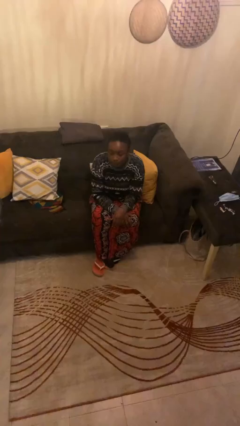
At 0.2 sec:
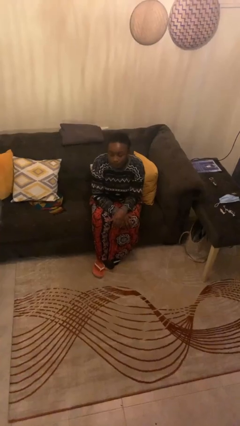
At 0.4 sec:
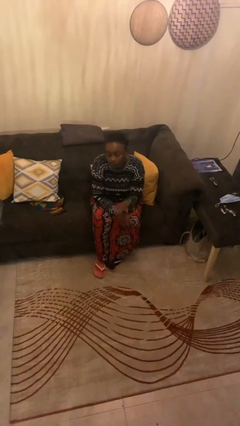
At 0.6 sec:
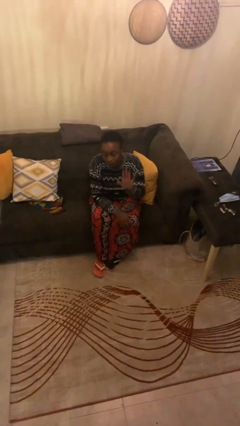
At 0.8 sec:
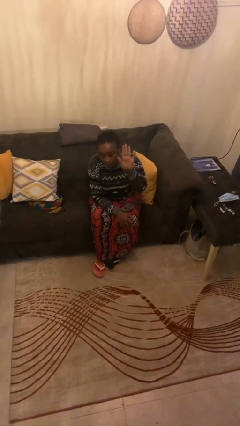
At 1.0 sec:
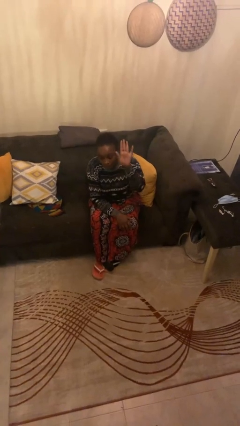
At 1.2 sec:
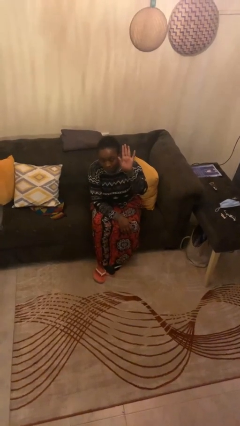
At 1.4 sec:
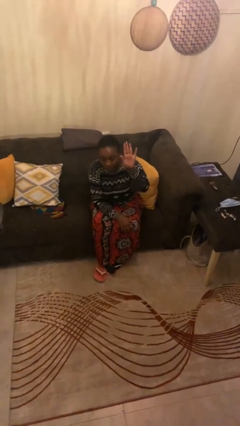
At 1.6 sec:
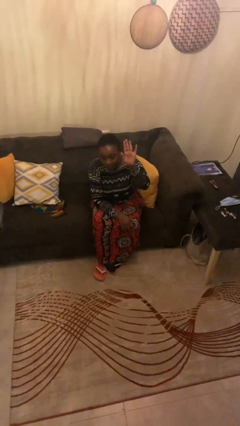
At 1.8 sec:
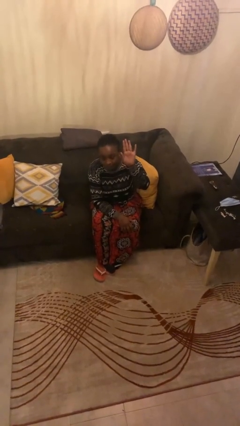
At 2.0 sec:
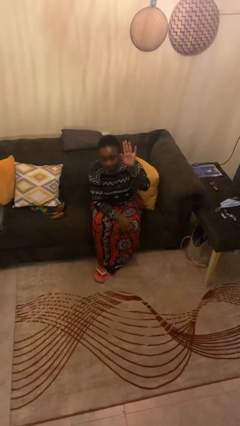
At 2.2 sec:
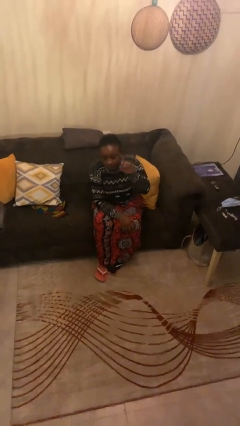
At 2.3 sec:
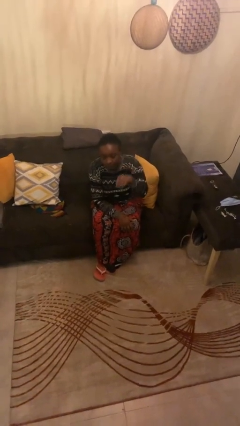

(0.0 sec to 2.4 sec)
person gestures raise hand

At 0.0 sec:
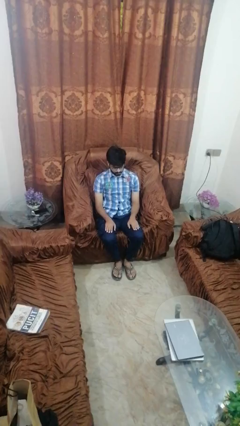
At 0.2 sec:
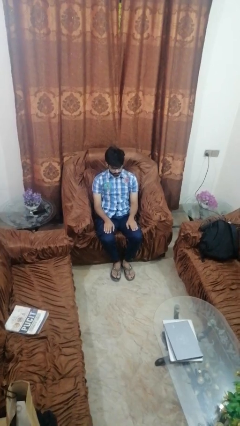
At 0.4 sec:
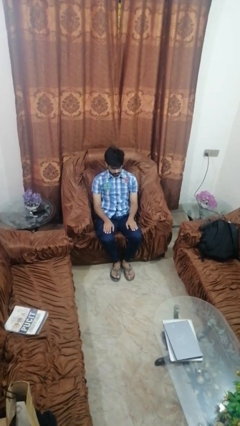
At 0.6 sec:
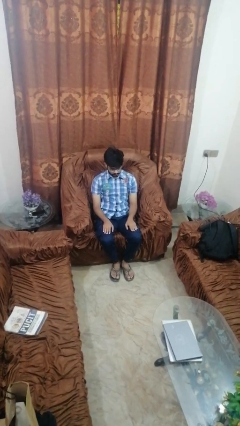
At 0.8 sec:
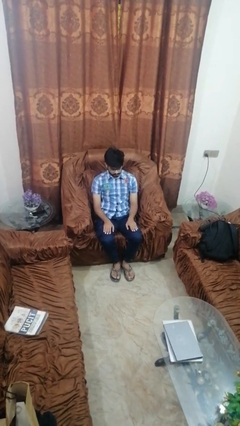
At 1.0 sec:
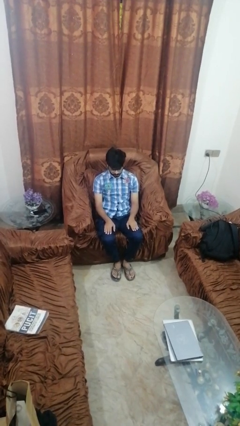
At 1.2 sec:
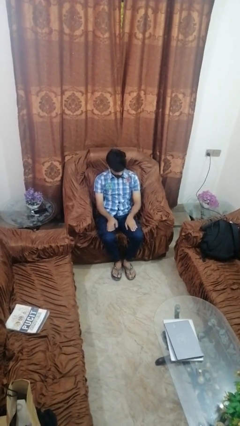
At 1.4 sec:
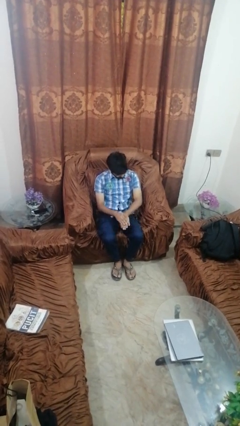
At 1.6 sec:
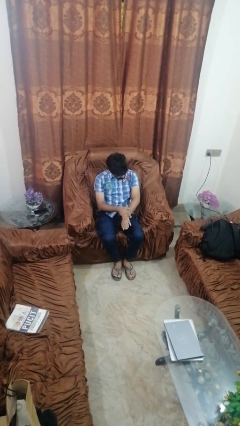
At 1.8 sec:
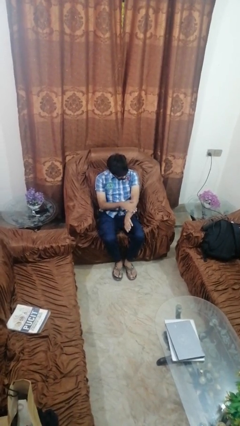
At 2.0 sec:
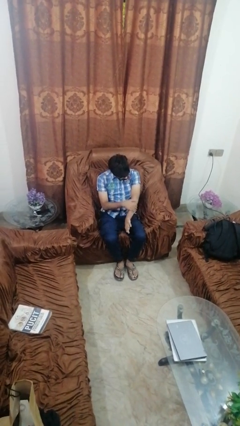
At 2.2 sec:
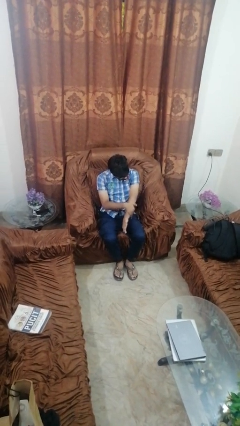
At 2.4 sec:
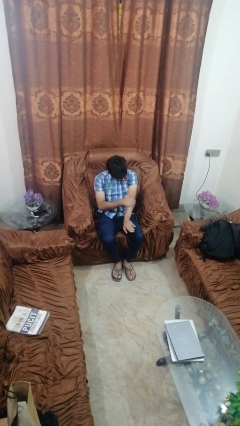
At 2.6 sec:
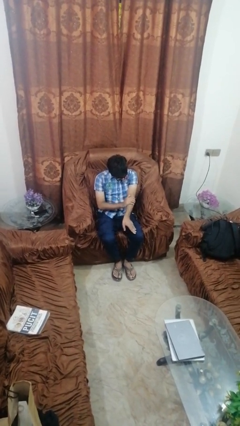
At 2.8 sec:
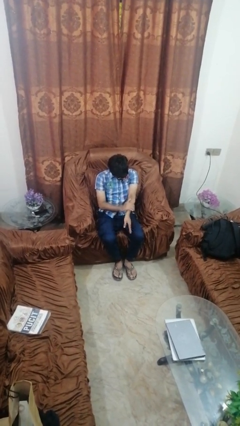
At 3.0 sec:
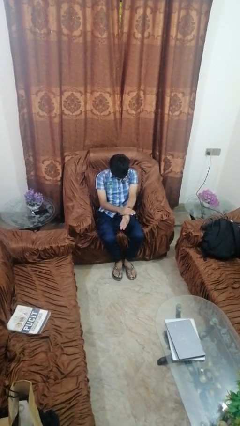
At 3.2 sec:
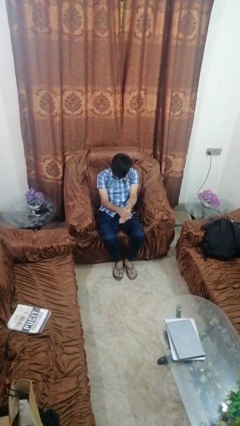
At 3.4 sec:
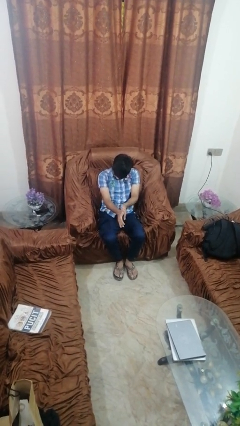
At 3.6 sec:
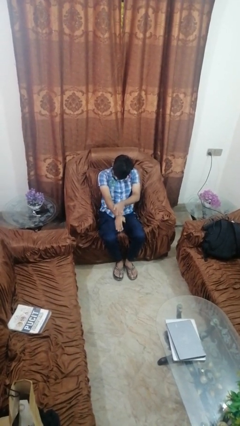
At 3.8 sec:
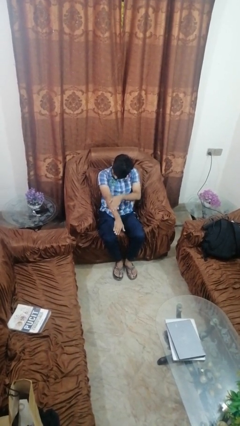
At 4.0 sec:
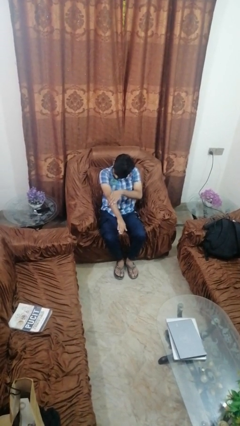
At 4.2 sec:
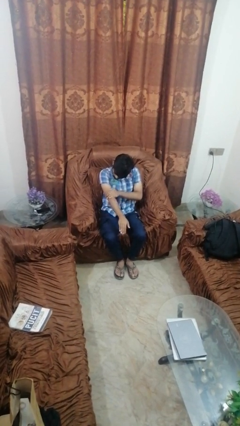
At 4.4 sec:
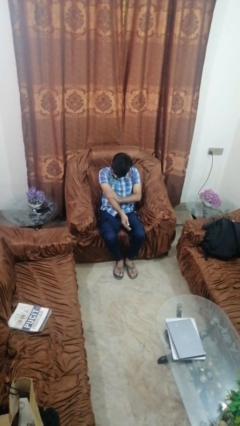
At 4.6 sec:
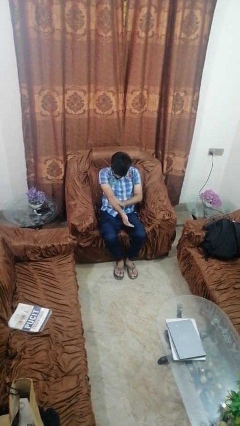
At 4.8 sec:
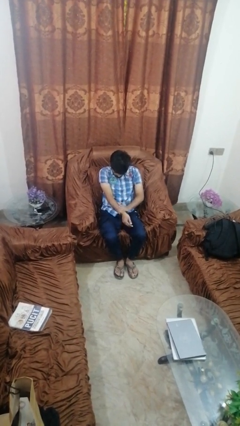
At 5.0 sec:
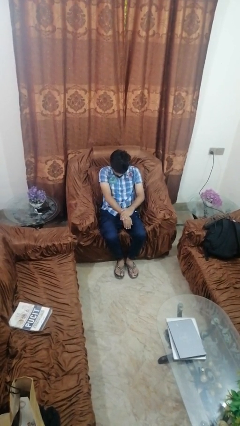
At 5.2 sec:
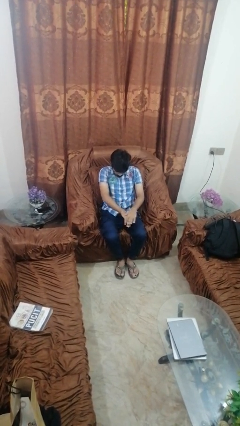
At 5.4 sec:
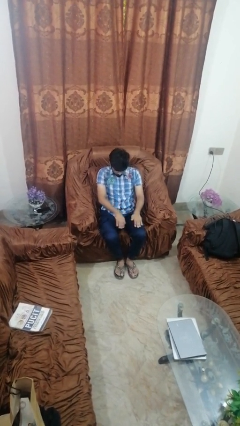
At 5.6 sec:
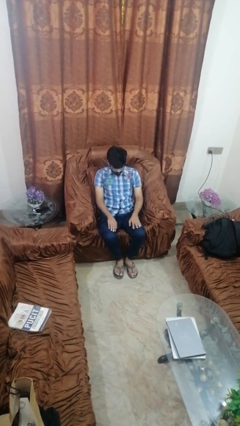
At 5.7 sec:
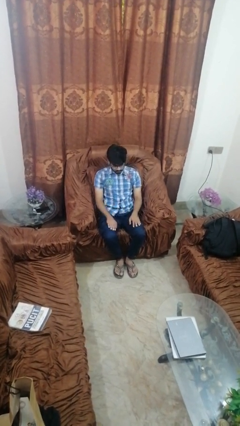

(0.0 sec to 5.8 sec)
person looks at hands in lap

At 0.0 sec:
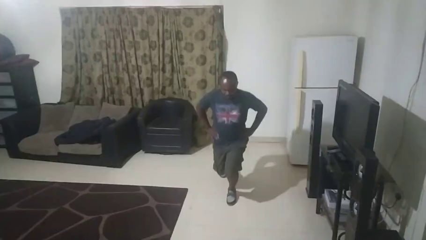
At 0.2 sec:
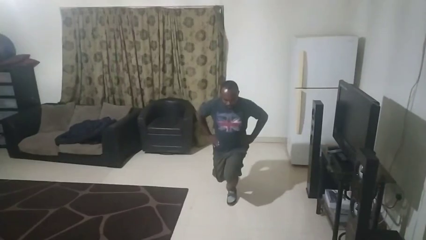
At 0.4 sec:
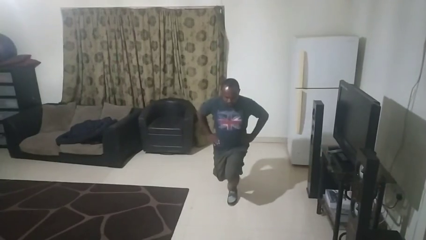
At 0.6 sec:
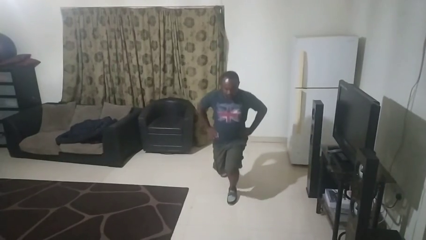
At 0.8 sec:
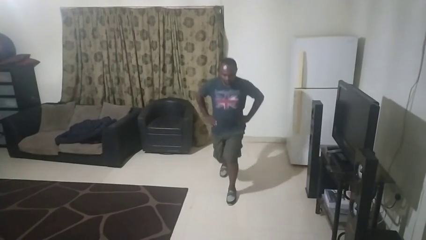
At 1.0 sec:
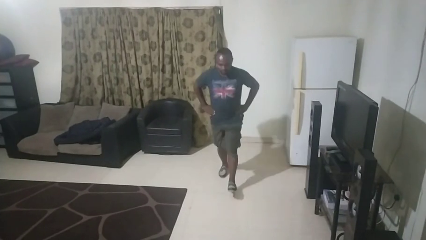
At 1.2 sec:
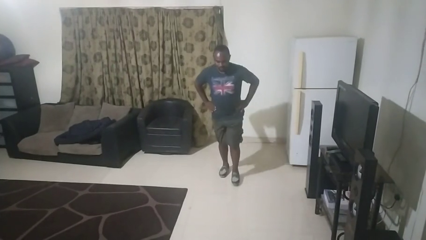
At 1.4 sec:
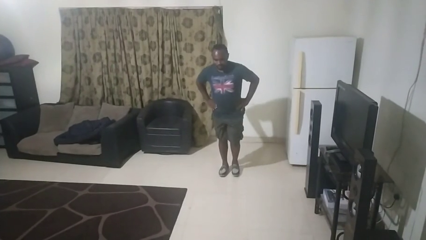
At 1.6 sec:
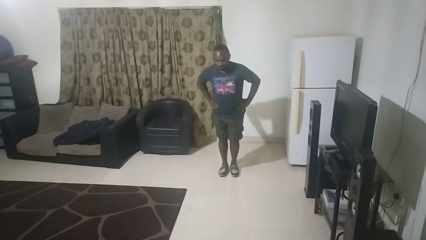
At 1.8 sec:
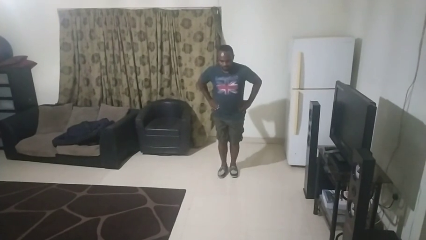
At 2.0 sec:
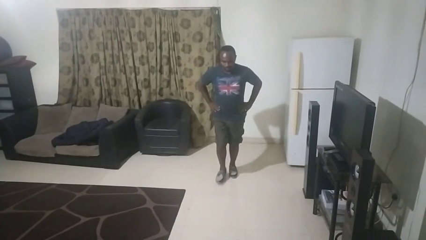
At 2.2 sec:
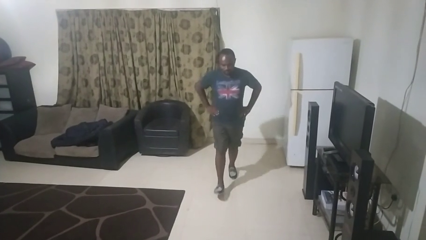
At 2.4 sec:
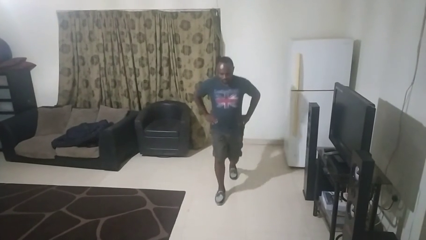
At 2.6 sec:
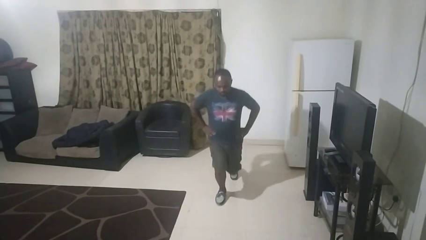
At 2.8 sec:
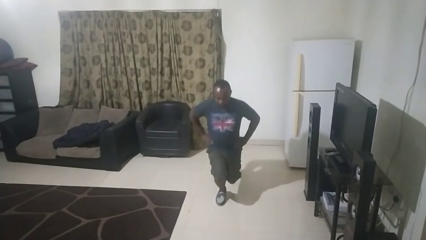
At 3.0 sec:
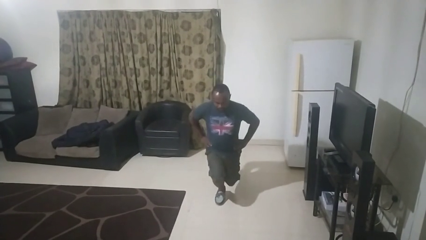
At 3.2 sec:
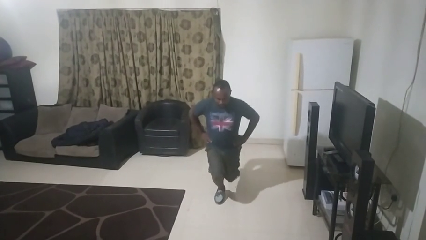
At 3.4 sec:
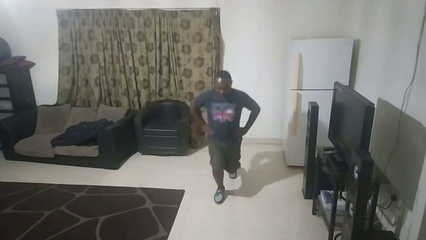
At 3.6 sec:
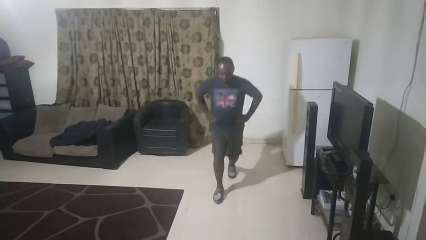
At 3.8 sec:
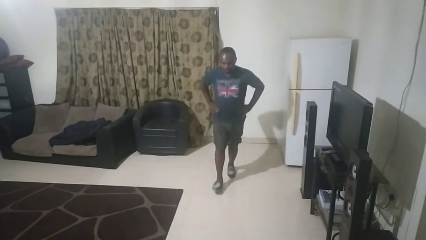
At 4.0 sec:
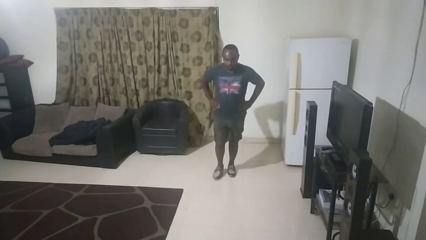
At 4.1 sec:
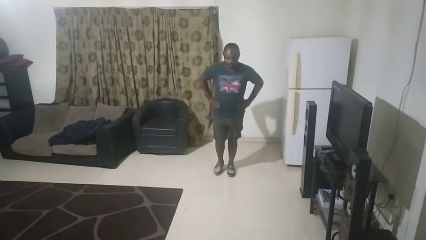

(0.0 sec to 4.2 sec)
person exercises with lunges

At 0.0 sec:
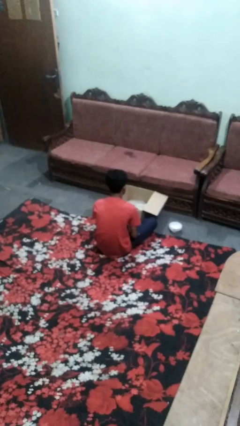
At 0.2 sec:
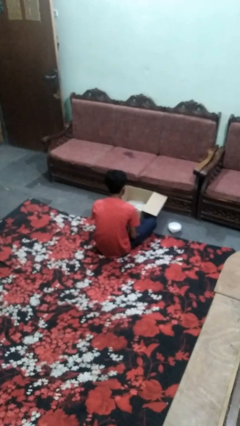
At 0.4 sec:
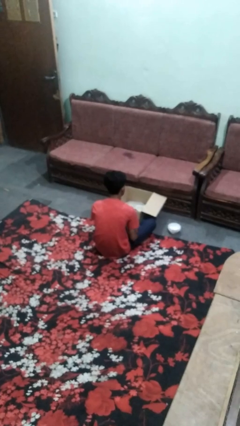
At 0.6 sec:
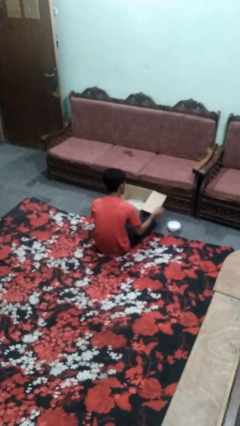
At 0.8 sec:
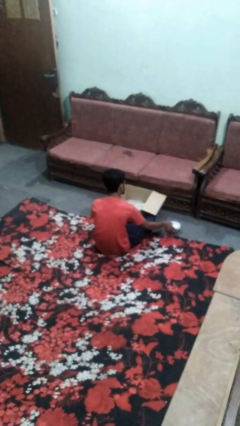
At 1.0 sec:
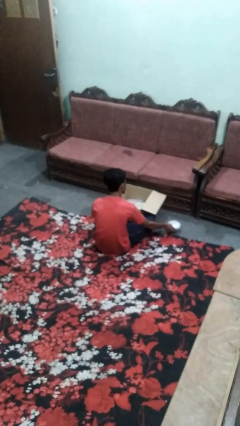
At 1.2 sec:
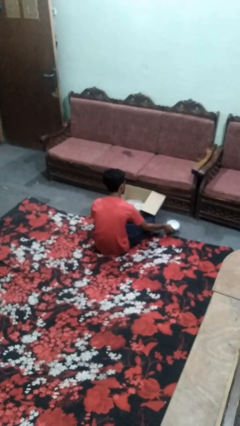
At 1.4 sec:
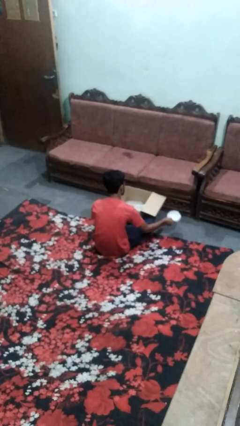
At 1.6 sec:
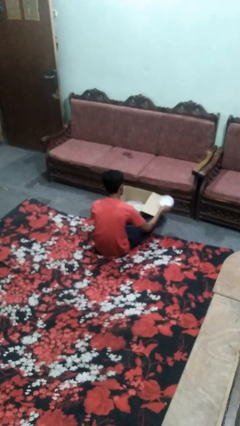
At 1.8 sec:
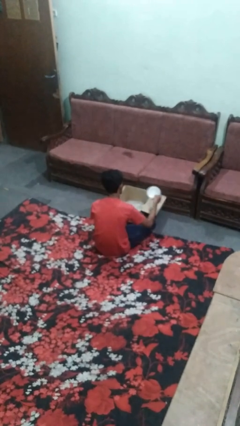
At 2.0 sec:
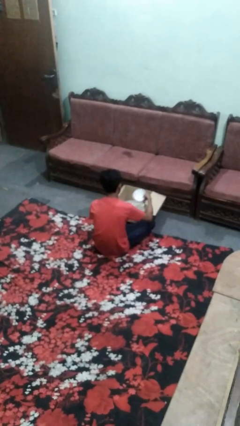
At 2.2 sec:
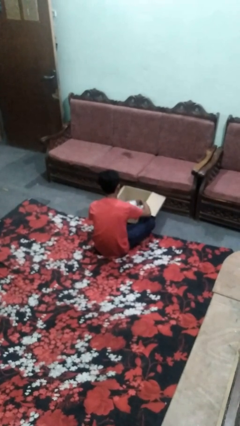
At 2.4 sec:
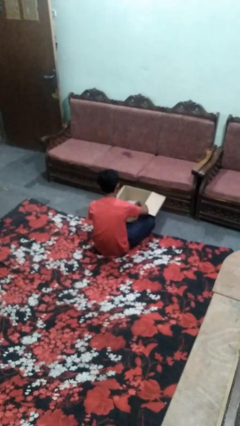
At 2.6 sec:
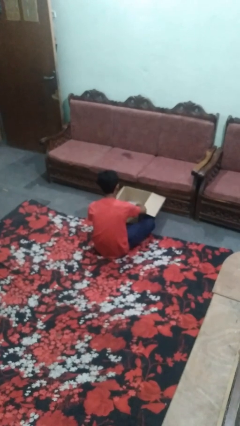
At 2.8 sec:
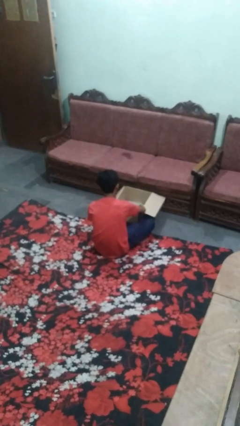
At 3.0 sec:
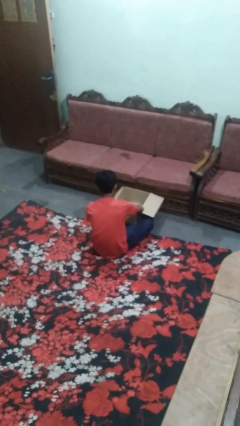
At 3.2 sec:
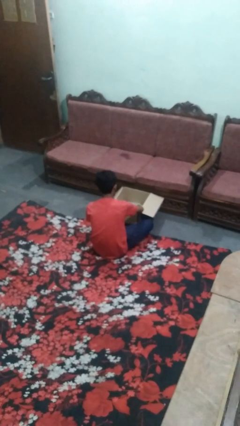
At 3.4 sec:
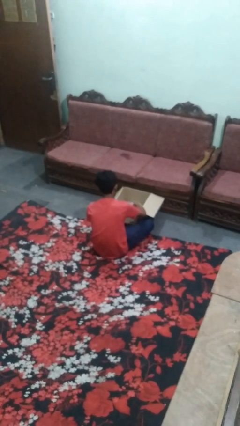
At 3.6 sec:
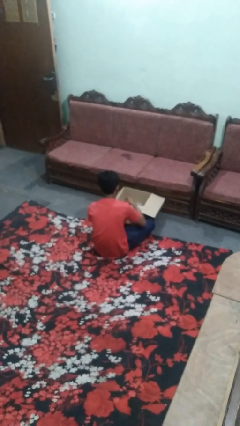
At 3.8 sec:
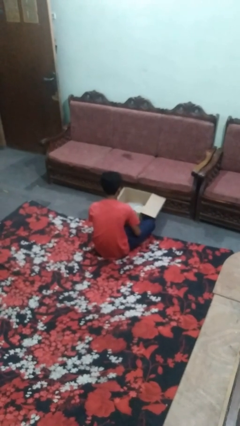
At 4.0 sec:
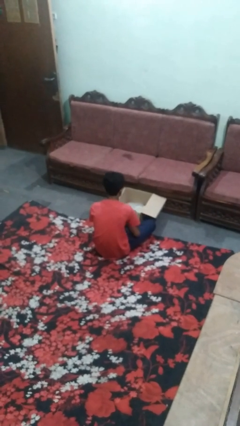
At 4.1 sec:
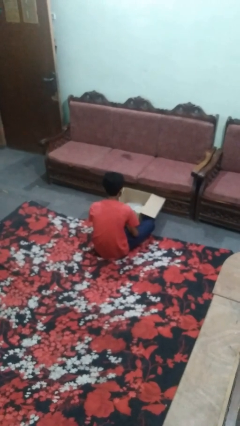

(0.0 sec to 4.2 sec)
person puts object into box

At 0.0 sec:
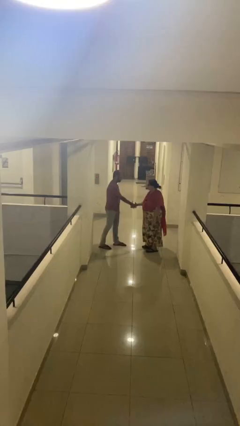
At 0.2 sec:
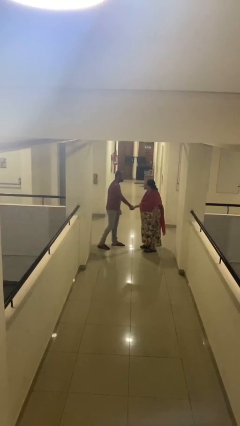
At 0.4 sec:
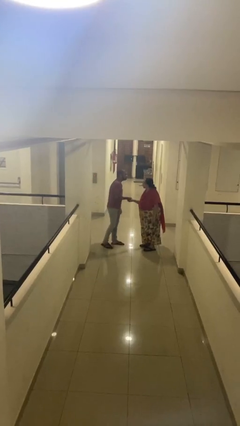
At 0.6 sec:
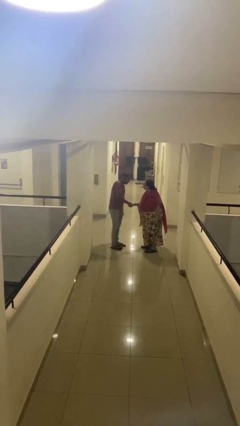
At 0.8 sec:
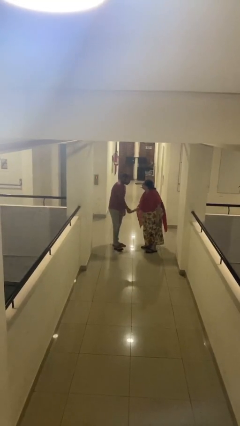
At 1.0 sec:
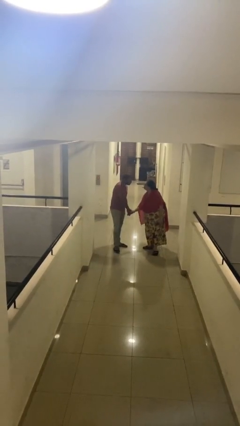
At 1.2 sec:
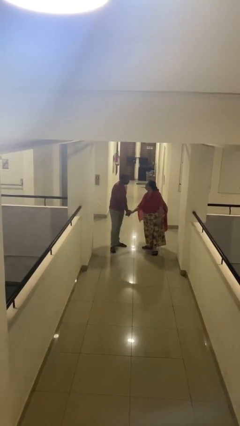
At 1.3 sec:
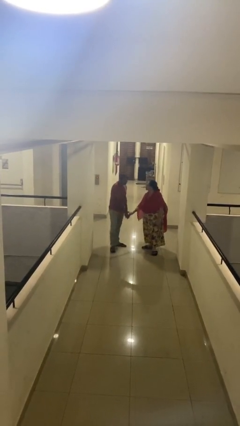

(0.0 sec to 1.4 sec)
person shakes hand
